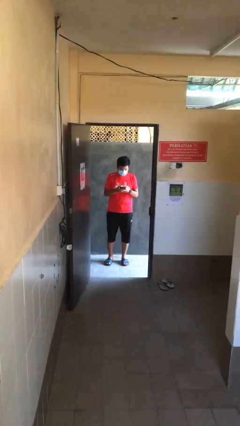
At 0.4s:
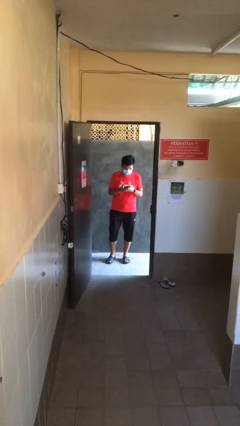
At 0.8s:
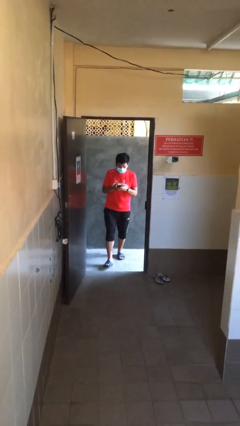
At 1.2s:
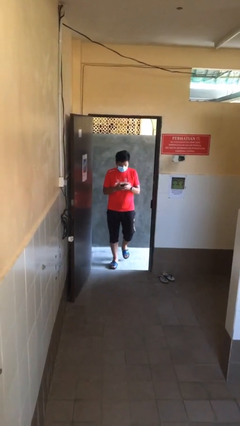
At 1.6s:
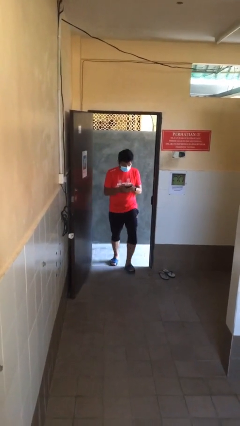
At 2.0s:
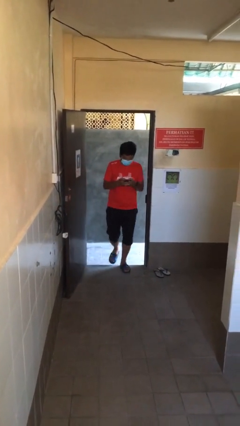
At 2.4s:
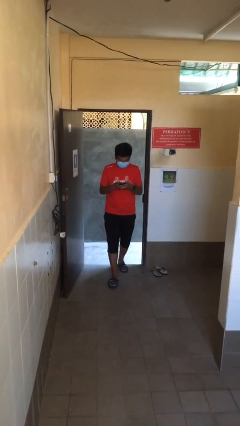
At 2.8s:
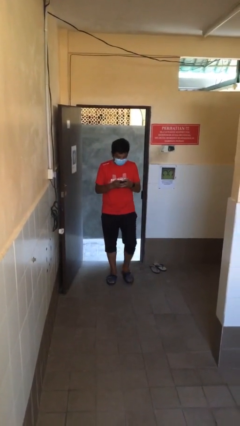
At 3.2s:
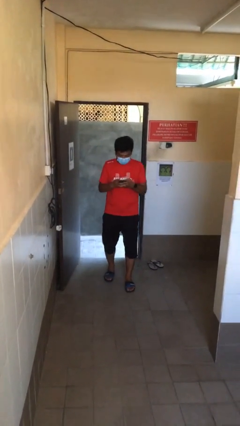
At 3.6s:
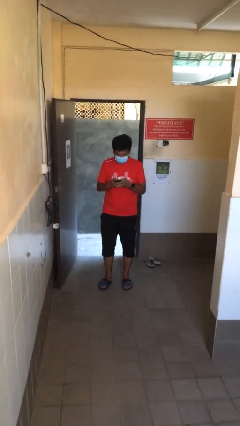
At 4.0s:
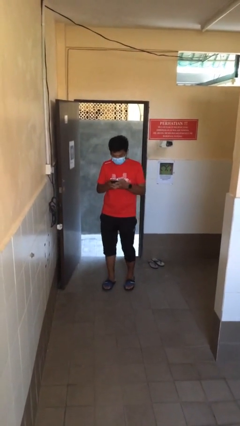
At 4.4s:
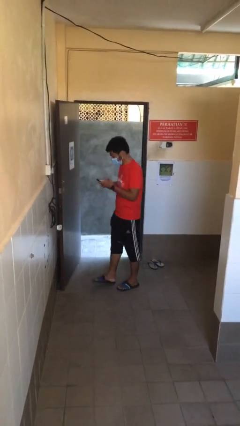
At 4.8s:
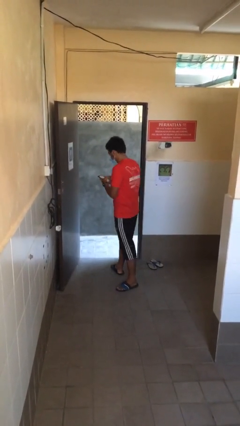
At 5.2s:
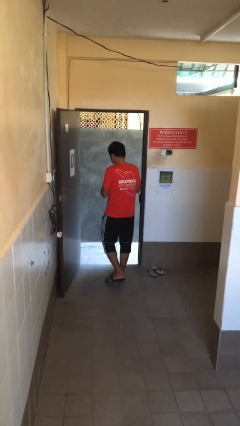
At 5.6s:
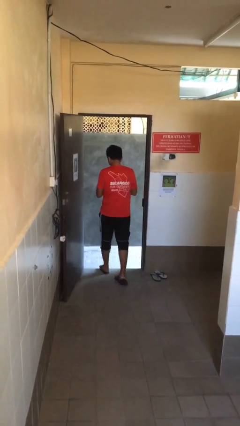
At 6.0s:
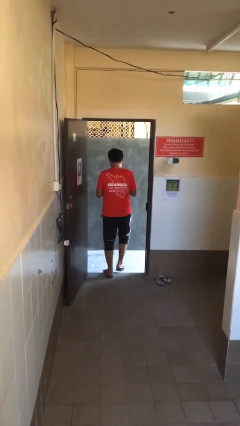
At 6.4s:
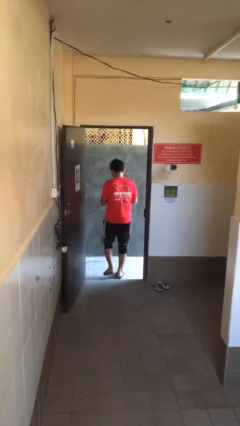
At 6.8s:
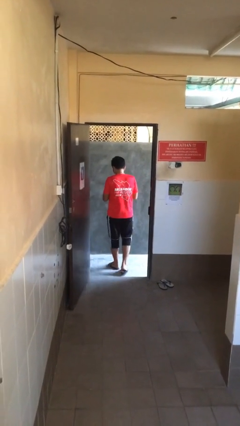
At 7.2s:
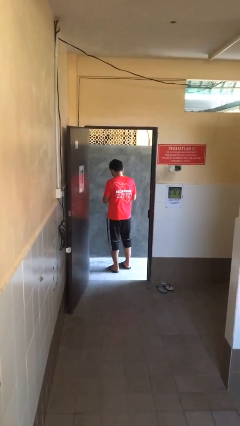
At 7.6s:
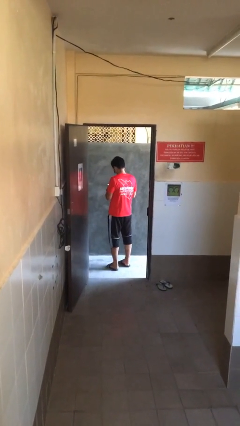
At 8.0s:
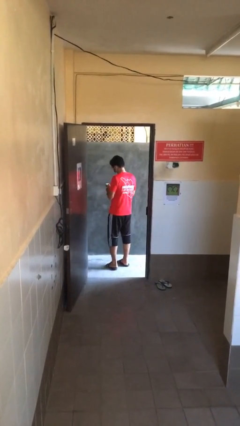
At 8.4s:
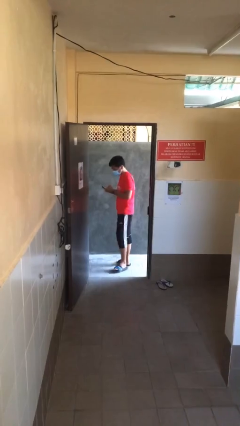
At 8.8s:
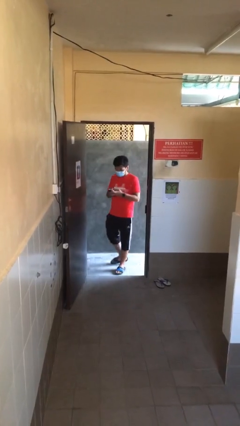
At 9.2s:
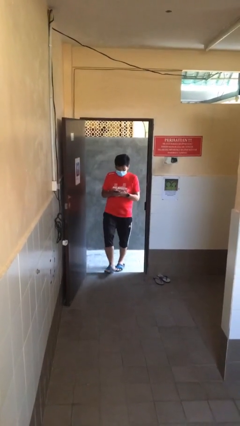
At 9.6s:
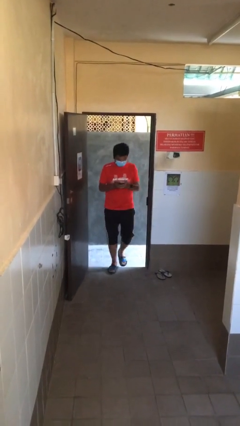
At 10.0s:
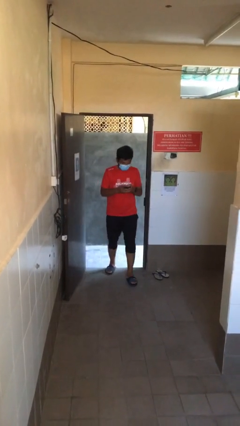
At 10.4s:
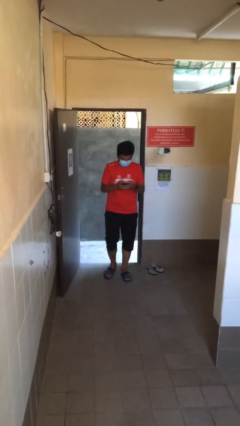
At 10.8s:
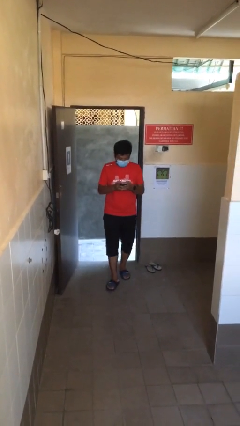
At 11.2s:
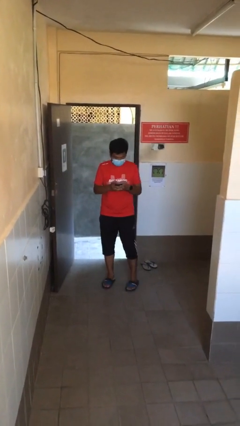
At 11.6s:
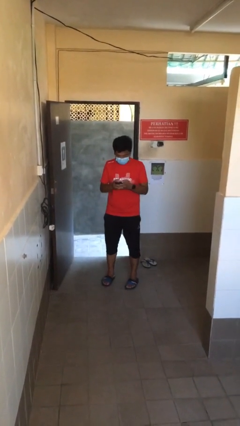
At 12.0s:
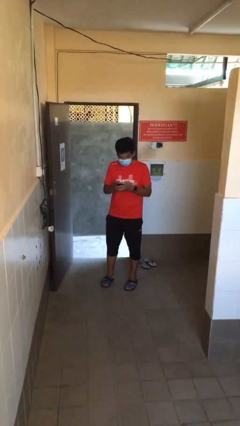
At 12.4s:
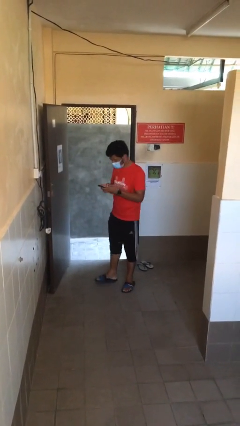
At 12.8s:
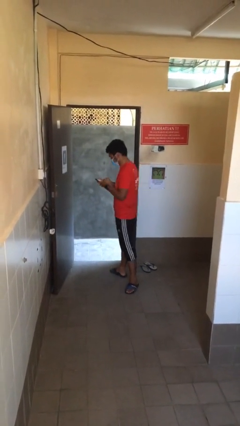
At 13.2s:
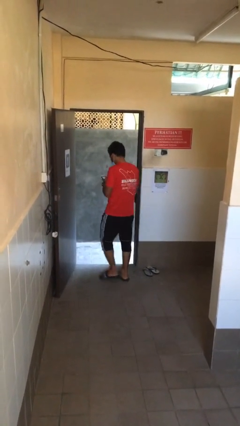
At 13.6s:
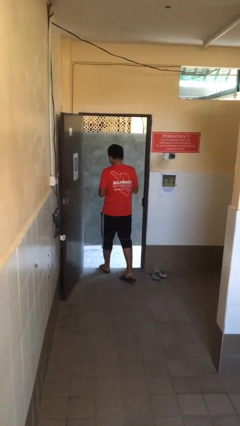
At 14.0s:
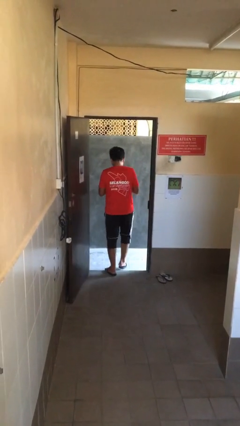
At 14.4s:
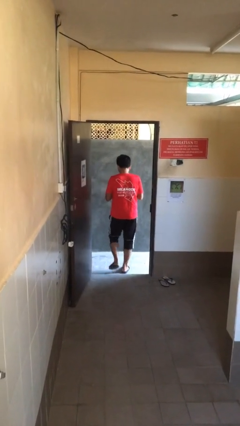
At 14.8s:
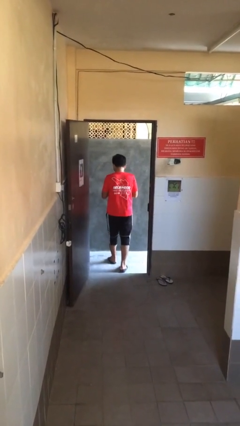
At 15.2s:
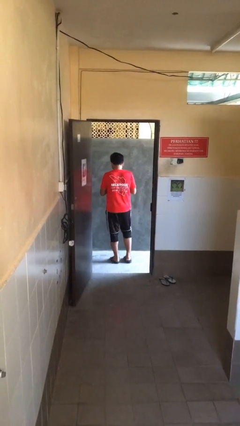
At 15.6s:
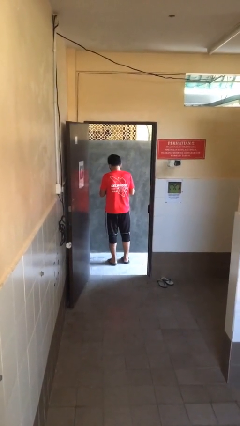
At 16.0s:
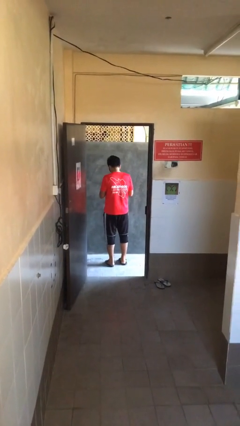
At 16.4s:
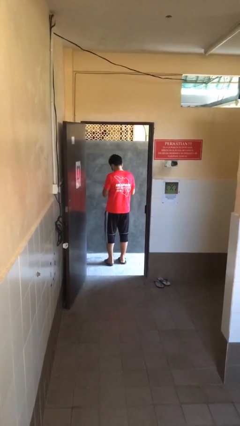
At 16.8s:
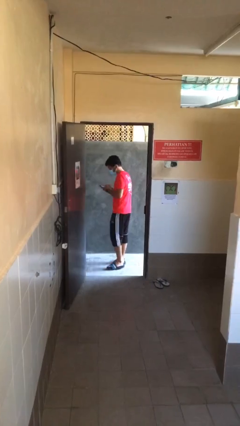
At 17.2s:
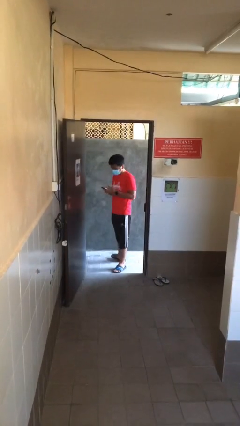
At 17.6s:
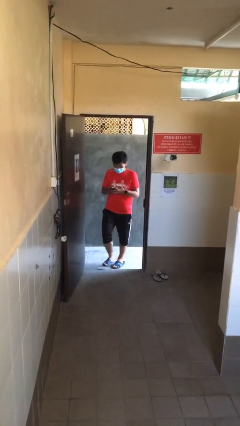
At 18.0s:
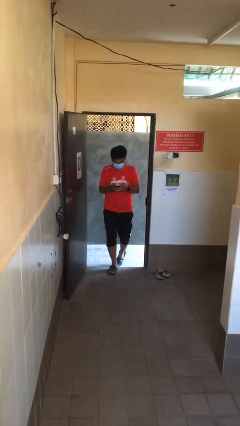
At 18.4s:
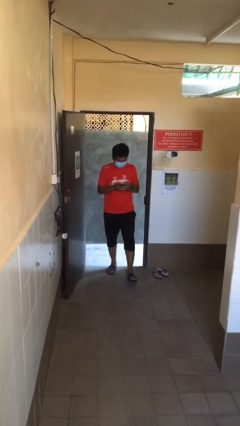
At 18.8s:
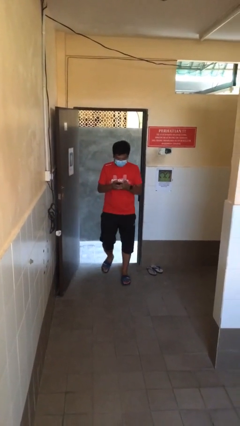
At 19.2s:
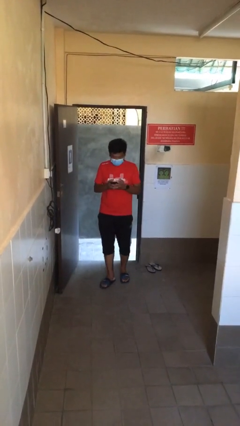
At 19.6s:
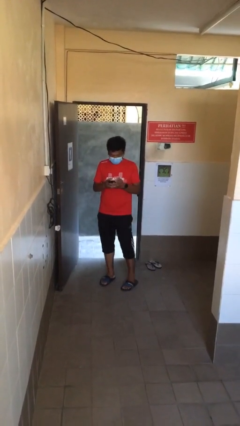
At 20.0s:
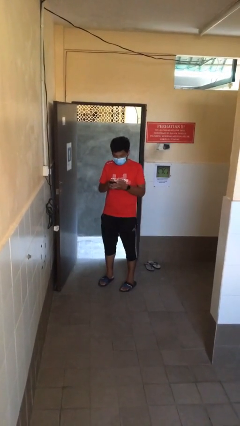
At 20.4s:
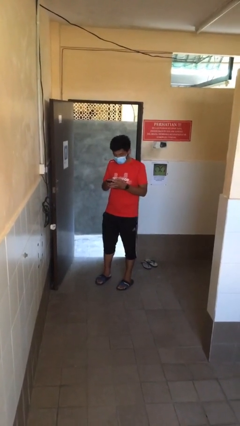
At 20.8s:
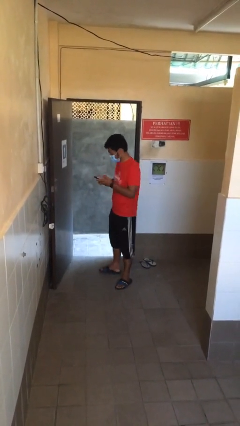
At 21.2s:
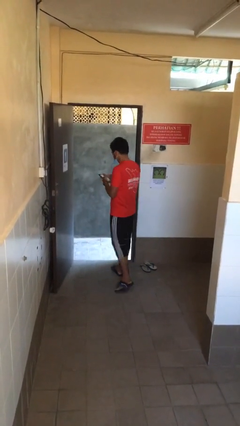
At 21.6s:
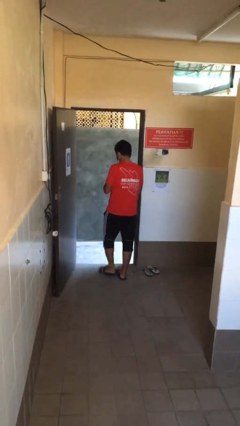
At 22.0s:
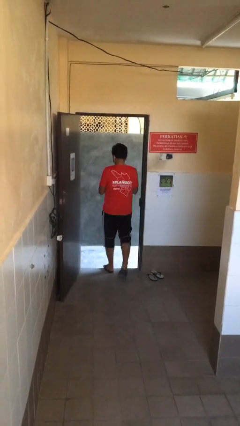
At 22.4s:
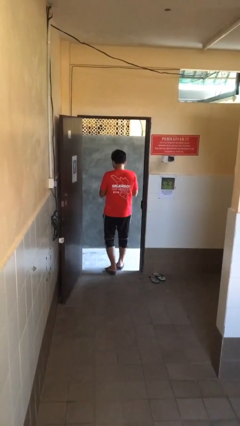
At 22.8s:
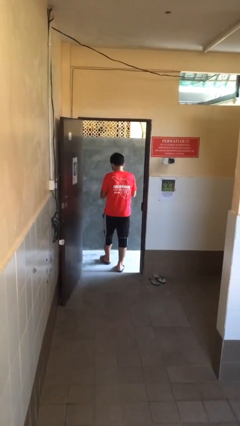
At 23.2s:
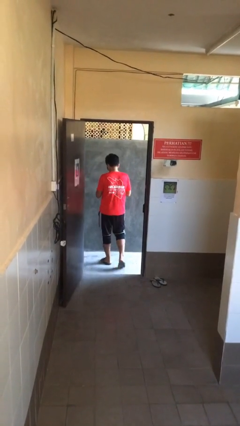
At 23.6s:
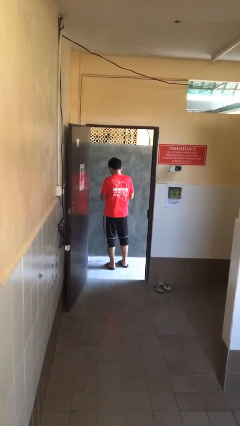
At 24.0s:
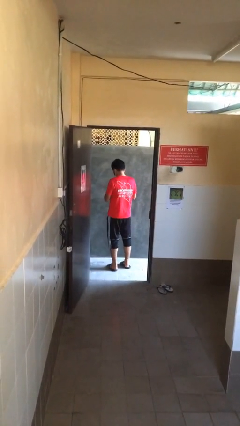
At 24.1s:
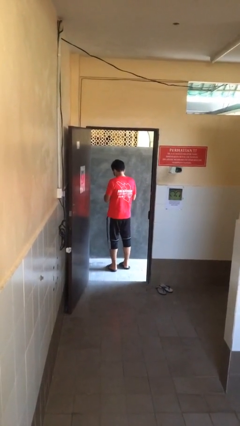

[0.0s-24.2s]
person texts on phone

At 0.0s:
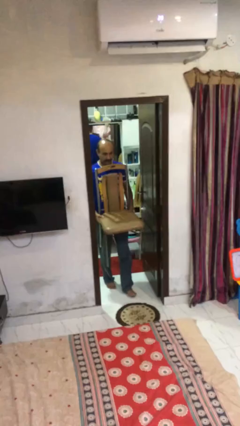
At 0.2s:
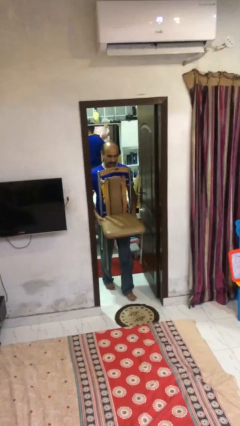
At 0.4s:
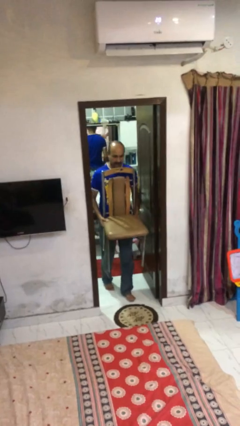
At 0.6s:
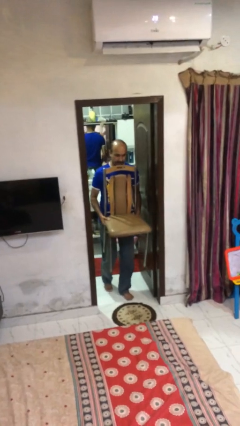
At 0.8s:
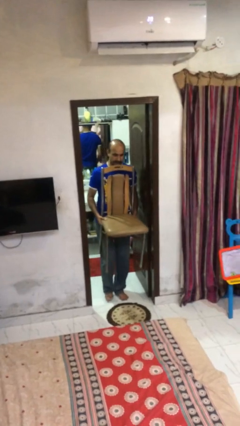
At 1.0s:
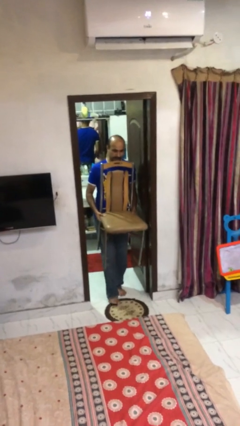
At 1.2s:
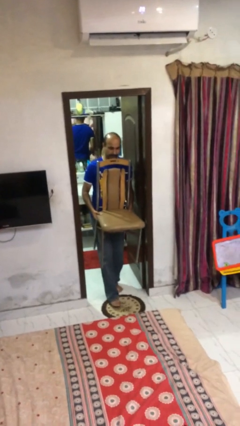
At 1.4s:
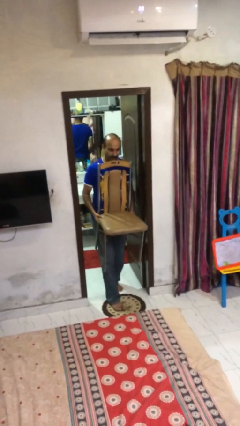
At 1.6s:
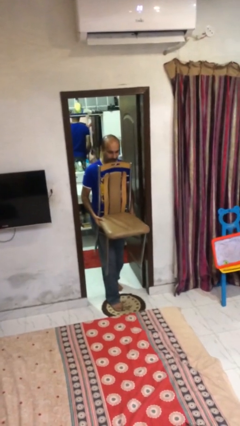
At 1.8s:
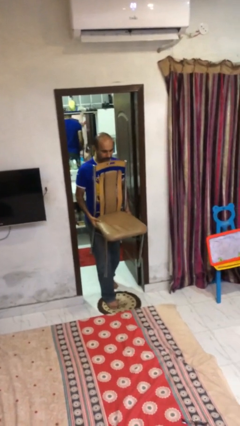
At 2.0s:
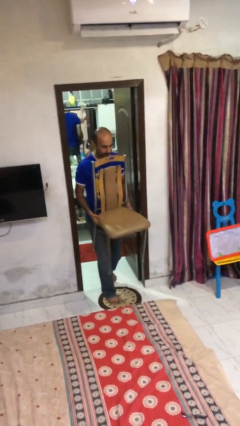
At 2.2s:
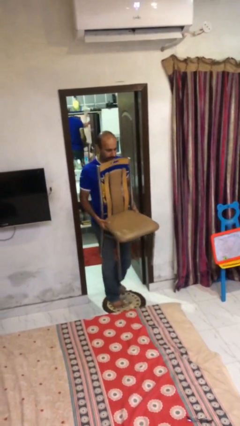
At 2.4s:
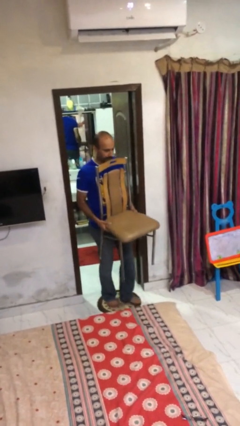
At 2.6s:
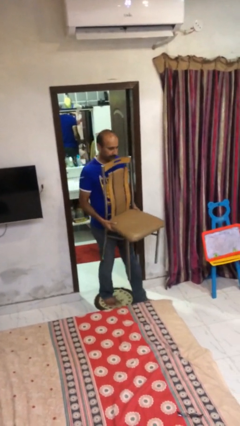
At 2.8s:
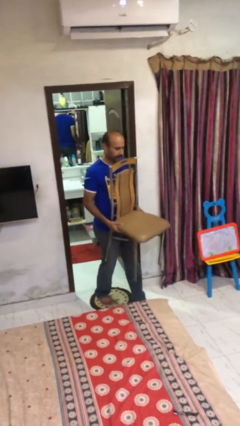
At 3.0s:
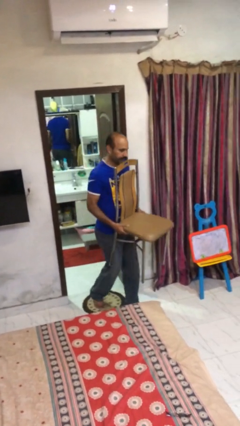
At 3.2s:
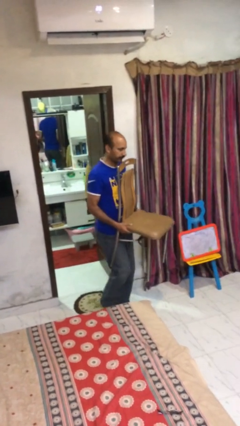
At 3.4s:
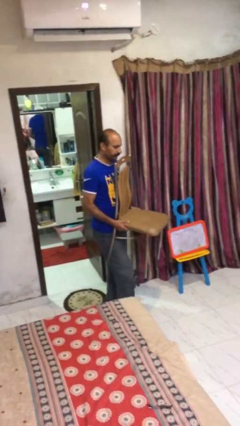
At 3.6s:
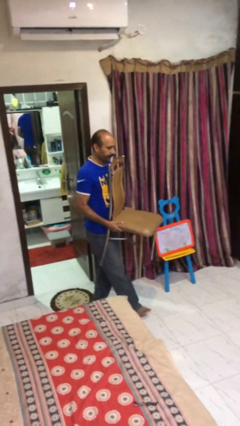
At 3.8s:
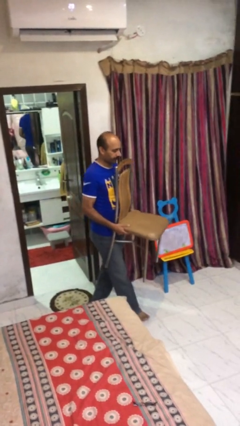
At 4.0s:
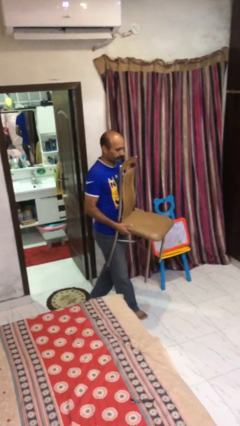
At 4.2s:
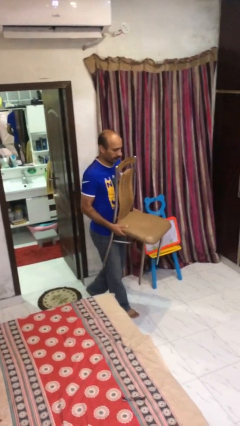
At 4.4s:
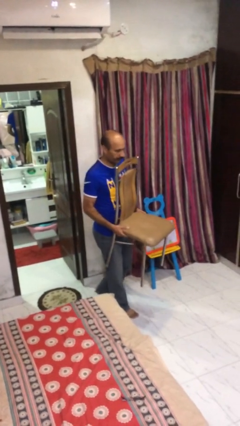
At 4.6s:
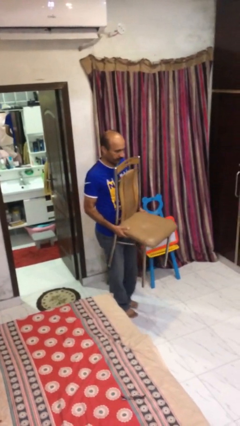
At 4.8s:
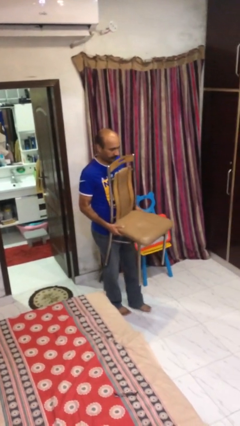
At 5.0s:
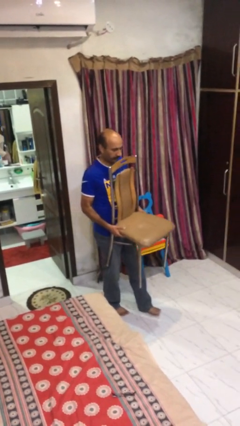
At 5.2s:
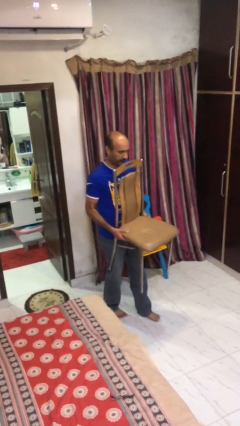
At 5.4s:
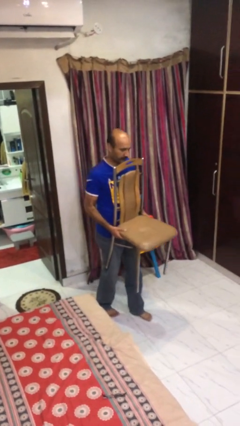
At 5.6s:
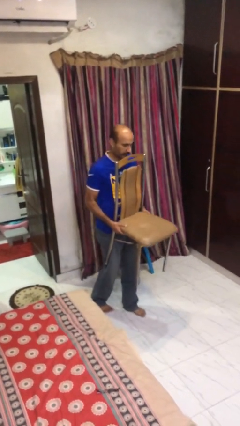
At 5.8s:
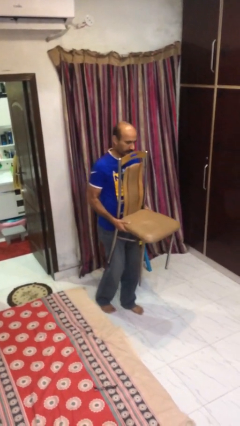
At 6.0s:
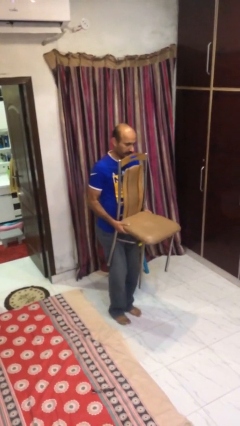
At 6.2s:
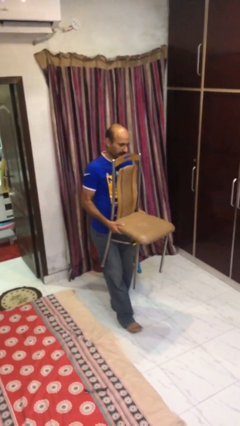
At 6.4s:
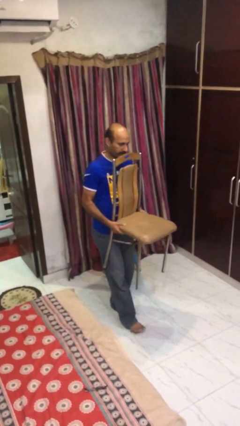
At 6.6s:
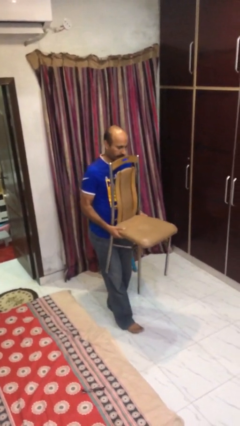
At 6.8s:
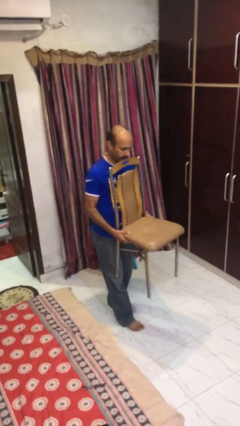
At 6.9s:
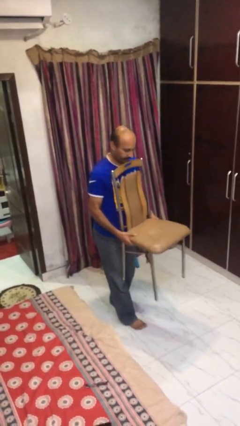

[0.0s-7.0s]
person carries heavy object
